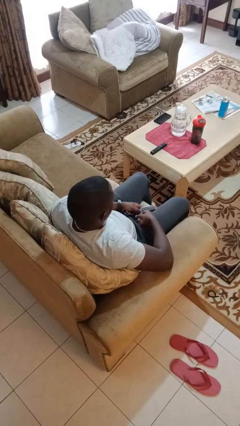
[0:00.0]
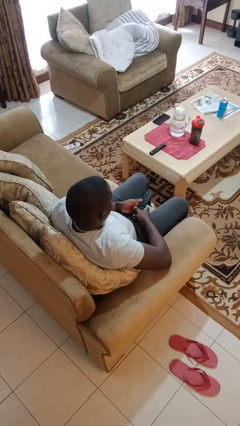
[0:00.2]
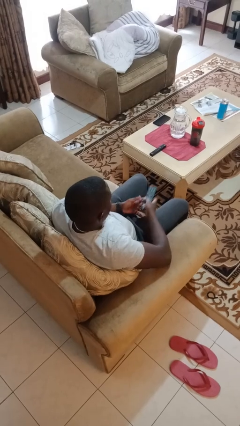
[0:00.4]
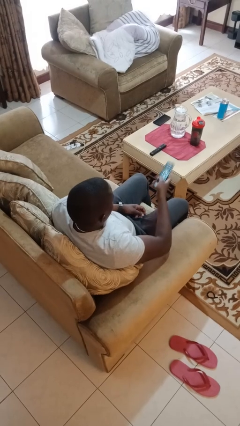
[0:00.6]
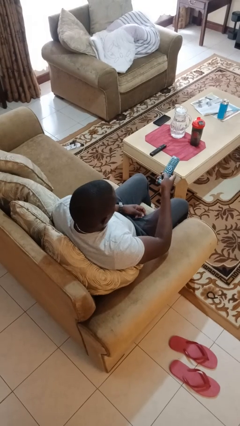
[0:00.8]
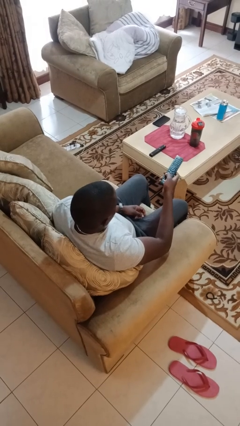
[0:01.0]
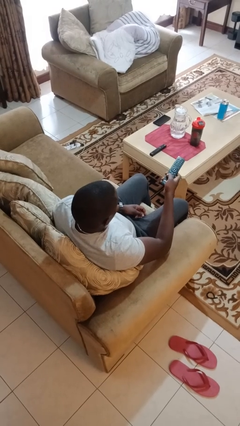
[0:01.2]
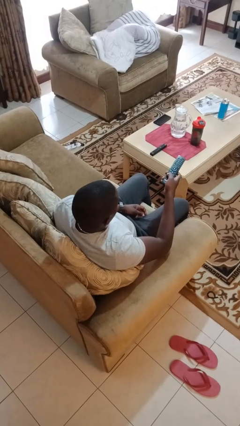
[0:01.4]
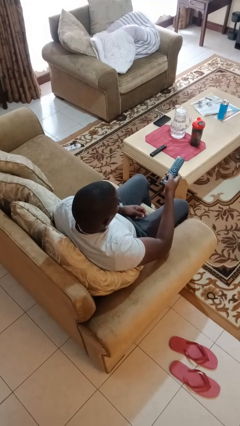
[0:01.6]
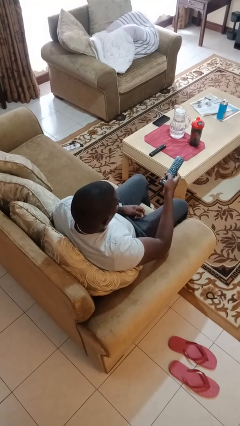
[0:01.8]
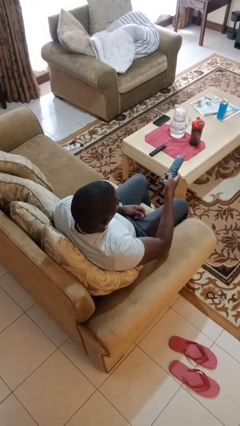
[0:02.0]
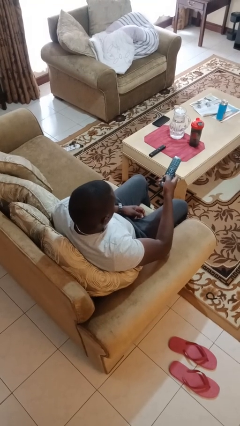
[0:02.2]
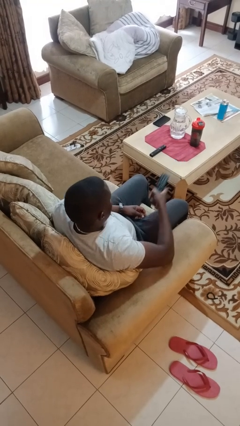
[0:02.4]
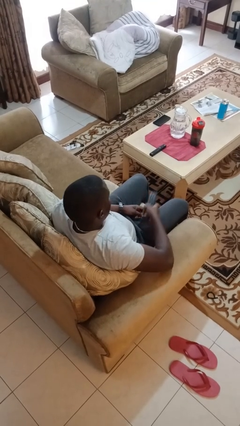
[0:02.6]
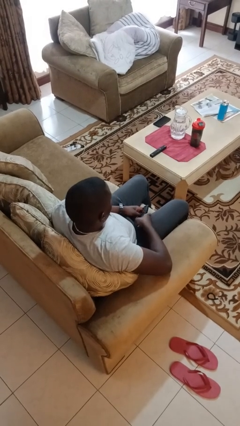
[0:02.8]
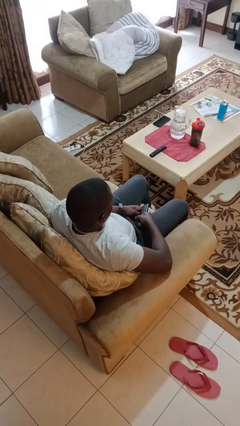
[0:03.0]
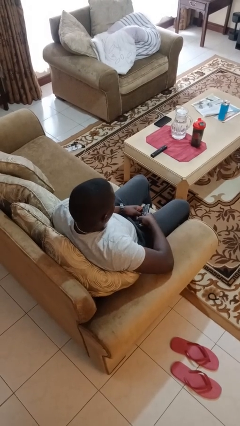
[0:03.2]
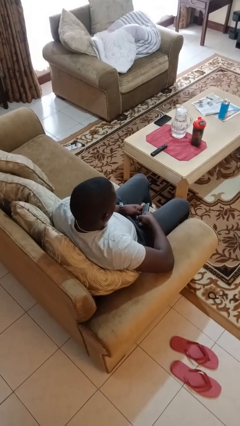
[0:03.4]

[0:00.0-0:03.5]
person uses television remote

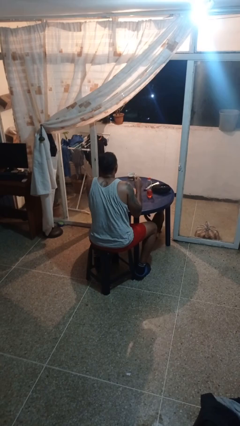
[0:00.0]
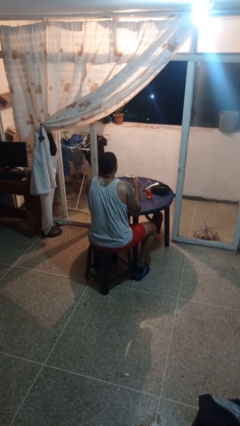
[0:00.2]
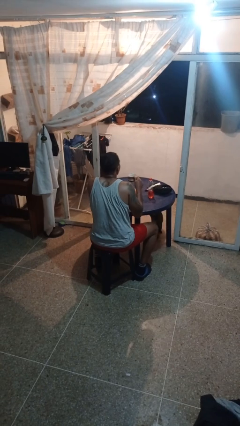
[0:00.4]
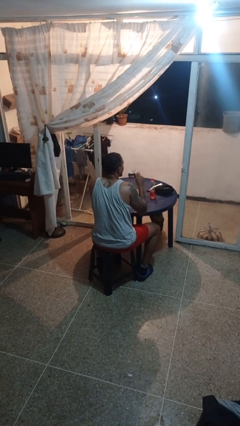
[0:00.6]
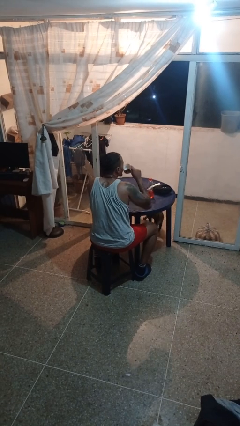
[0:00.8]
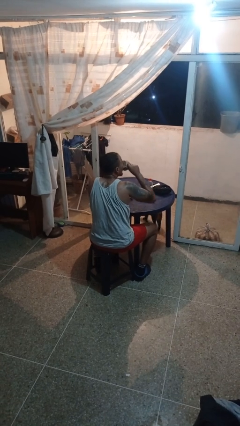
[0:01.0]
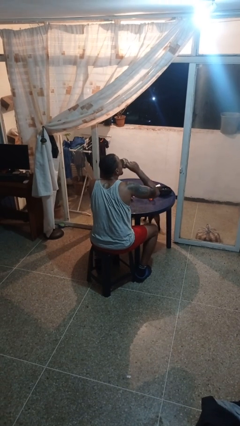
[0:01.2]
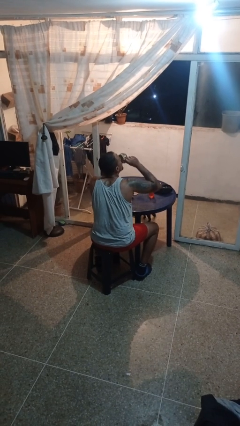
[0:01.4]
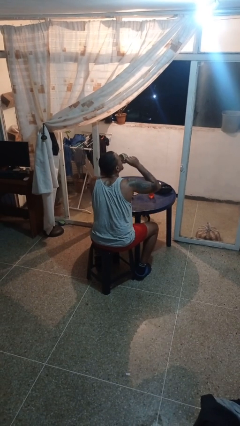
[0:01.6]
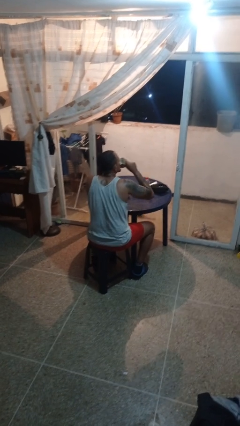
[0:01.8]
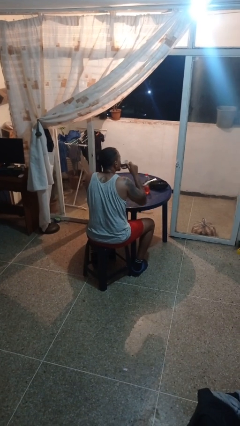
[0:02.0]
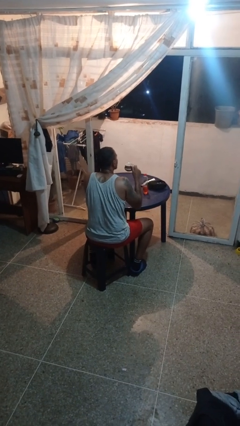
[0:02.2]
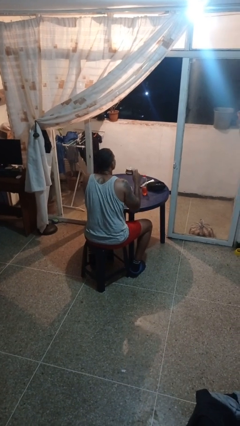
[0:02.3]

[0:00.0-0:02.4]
person drinks from mug

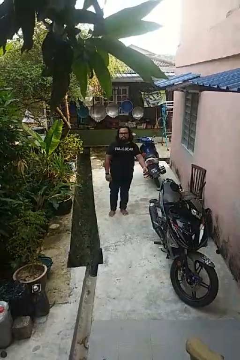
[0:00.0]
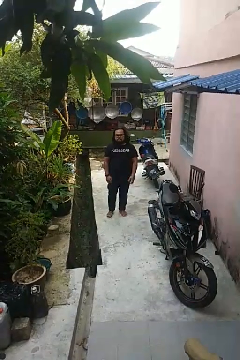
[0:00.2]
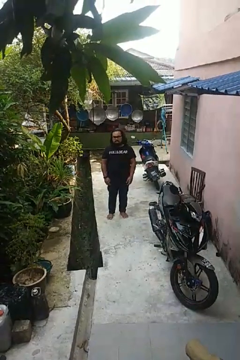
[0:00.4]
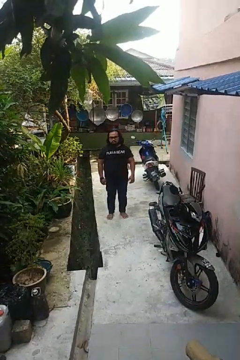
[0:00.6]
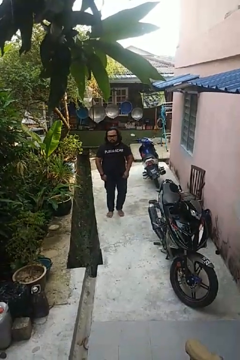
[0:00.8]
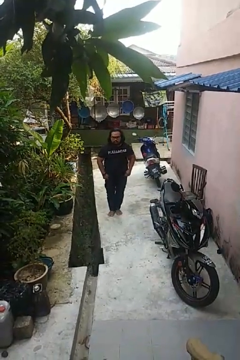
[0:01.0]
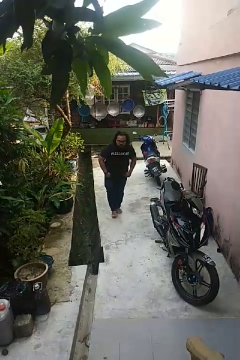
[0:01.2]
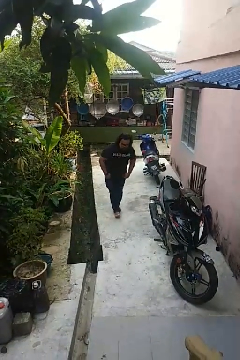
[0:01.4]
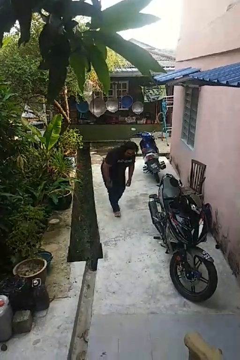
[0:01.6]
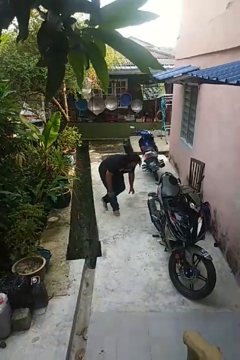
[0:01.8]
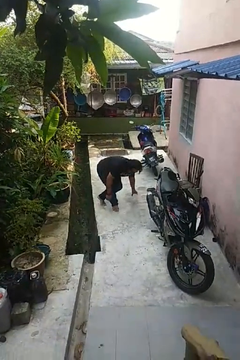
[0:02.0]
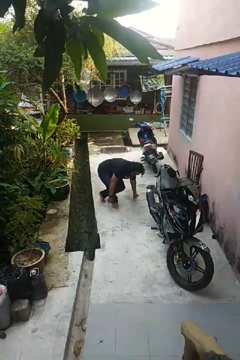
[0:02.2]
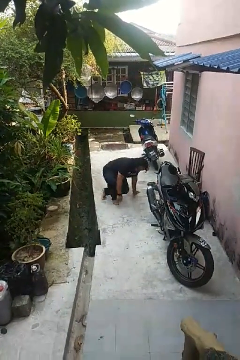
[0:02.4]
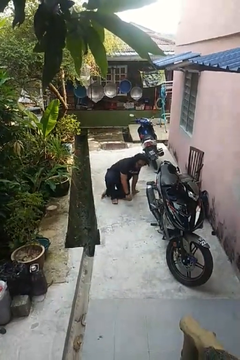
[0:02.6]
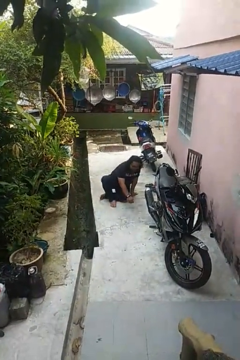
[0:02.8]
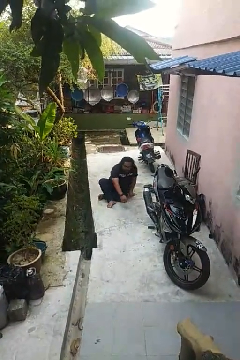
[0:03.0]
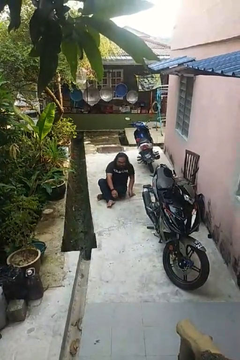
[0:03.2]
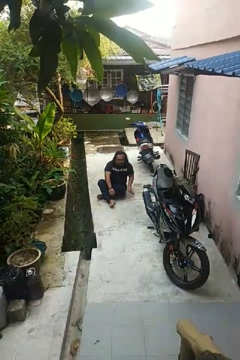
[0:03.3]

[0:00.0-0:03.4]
person sits crisscross

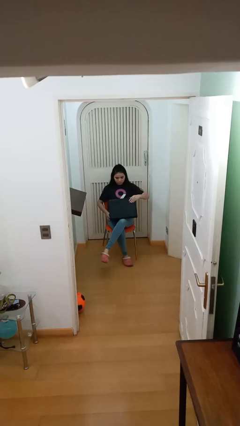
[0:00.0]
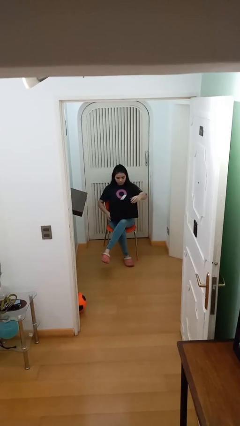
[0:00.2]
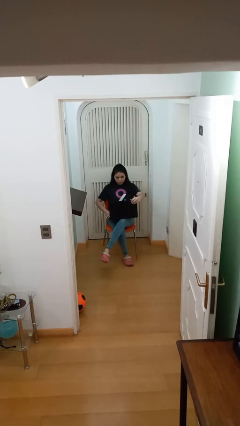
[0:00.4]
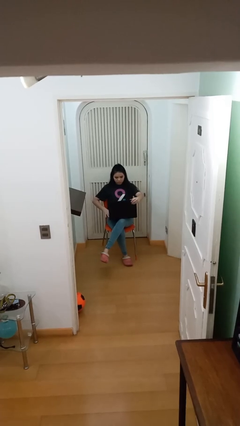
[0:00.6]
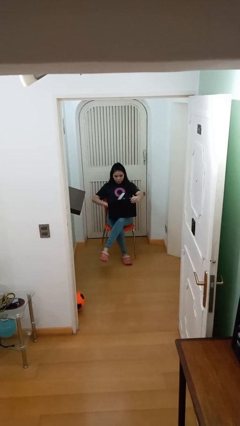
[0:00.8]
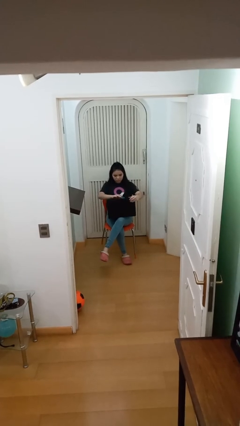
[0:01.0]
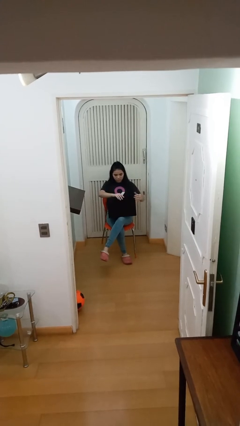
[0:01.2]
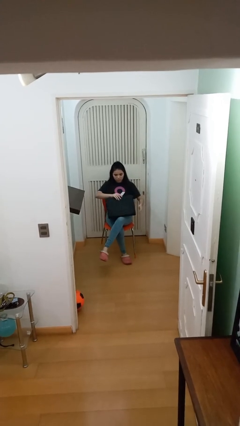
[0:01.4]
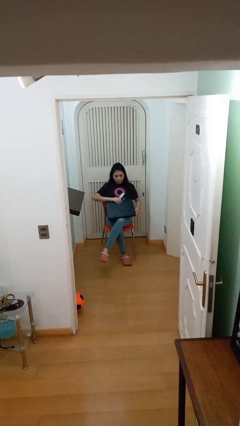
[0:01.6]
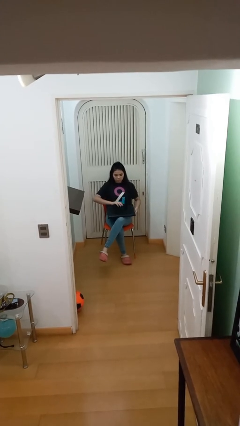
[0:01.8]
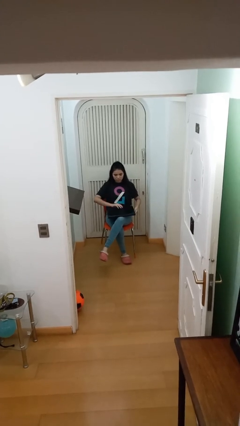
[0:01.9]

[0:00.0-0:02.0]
person interacts with laptop

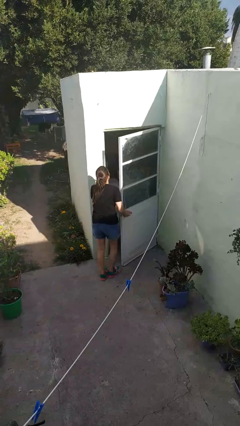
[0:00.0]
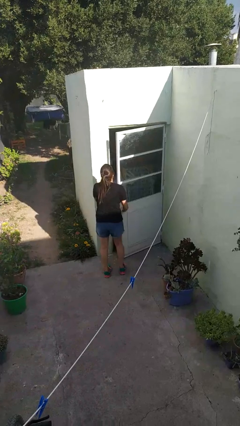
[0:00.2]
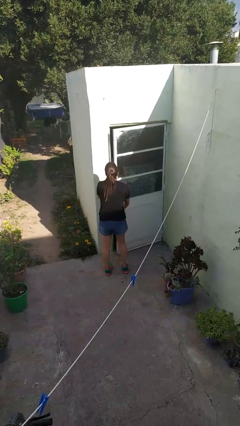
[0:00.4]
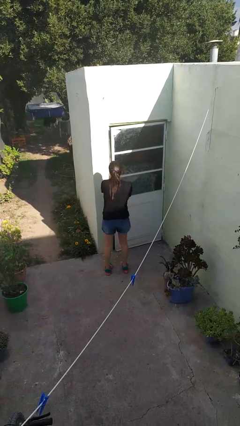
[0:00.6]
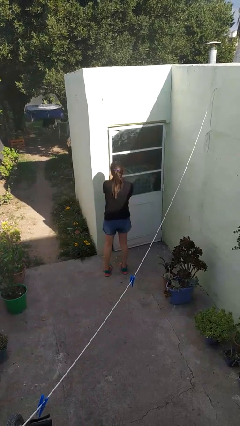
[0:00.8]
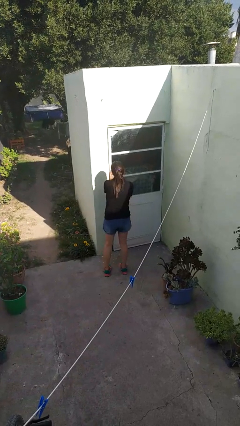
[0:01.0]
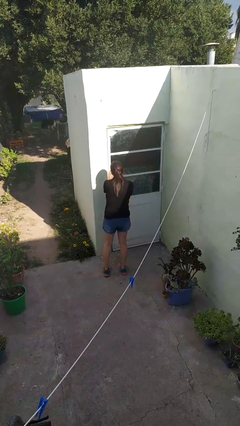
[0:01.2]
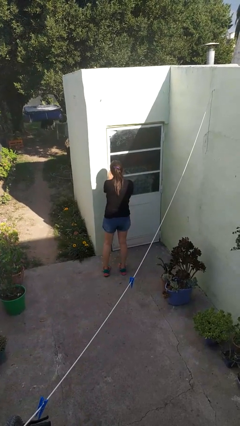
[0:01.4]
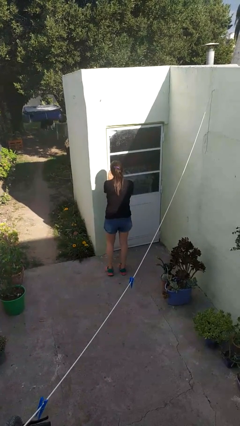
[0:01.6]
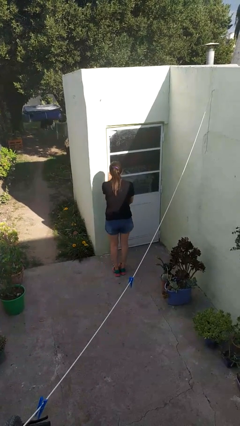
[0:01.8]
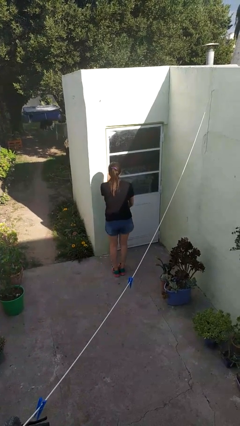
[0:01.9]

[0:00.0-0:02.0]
person closes facility door

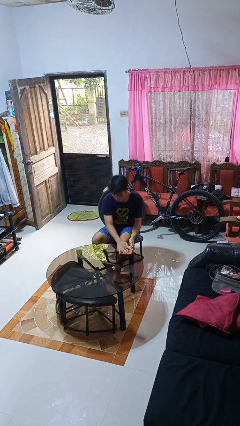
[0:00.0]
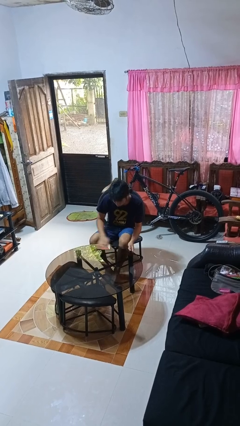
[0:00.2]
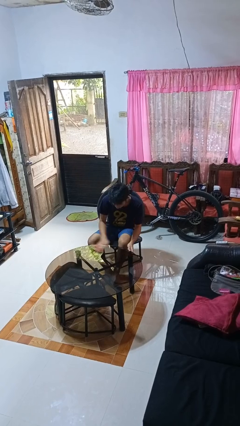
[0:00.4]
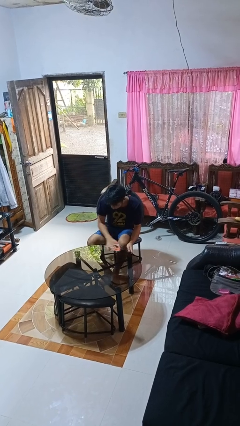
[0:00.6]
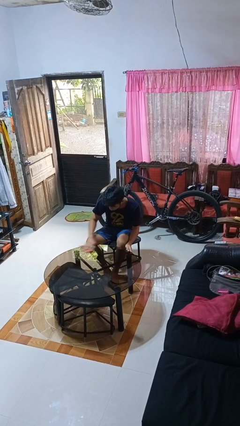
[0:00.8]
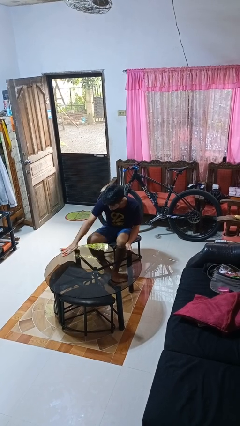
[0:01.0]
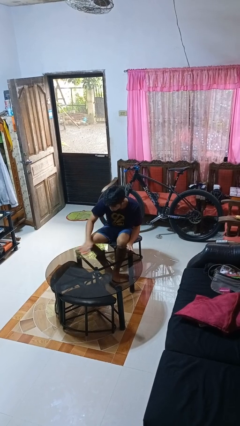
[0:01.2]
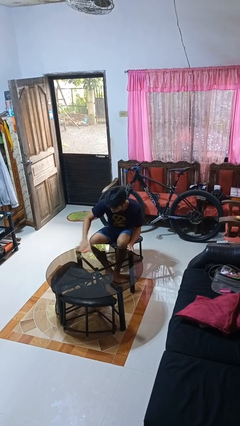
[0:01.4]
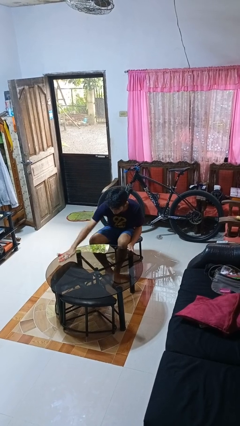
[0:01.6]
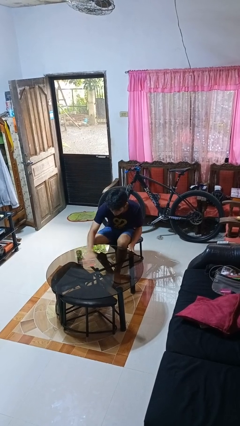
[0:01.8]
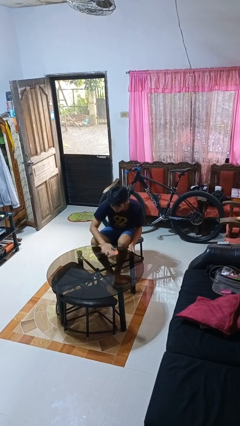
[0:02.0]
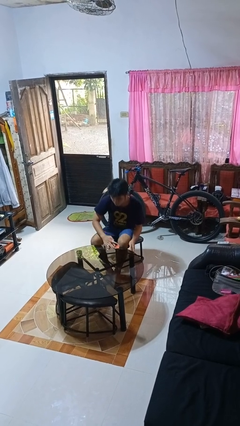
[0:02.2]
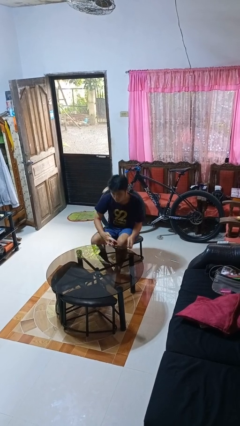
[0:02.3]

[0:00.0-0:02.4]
person cleans table with rag

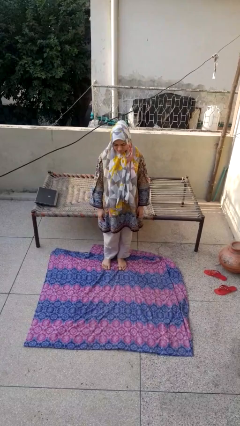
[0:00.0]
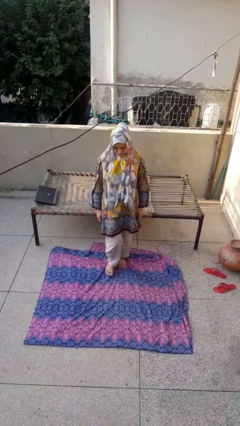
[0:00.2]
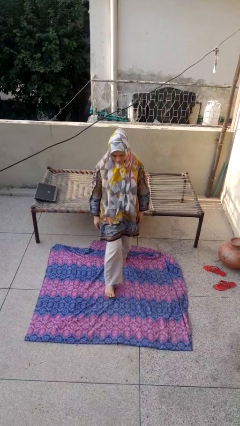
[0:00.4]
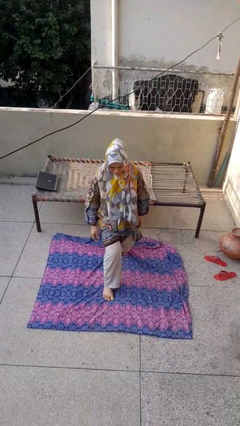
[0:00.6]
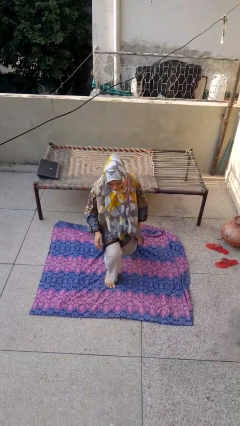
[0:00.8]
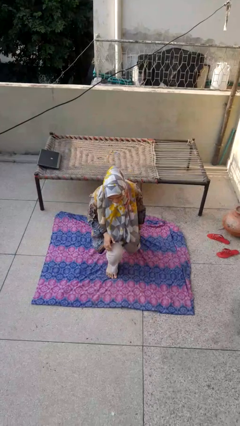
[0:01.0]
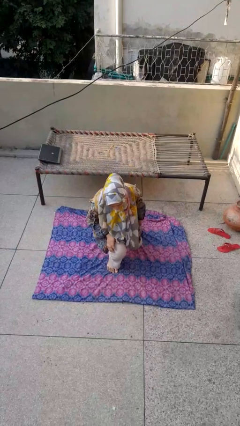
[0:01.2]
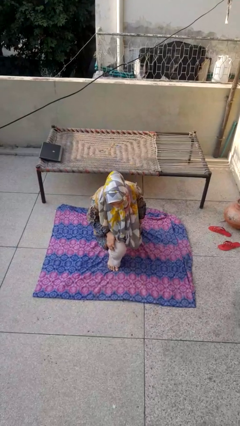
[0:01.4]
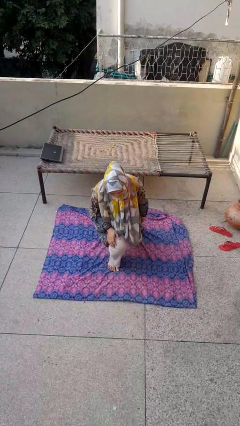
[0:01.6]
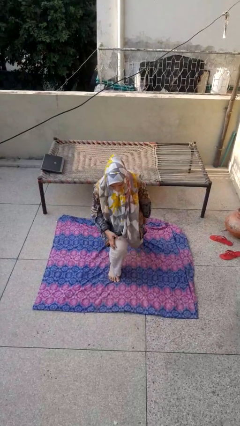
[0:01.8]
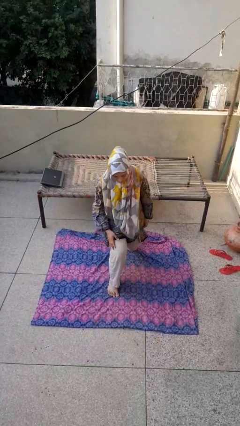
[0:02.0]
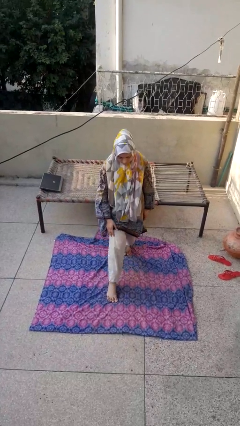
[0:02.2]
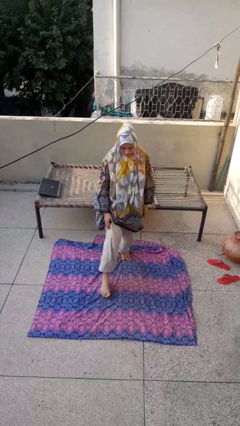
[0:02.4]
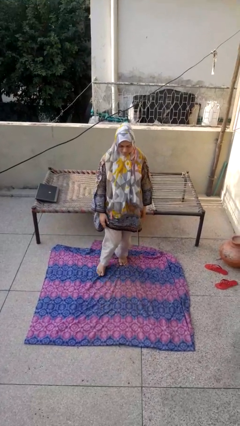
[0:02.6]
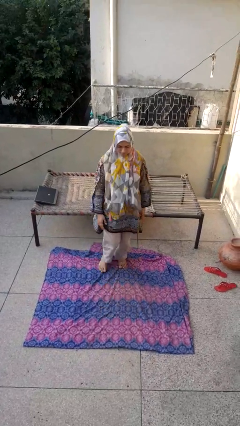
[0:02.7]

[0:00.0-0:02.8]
person exercises with lunges
